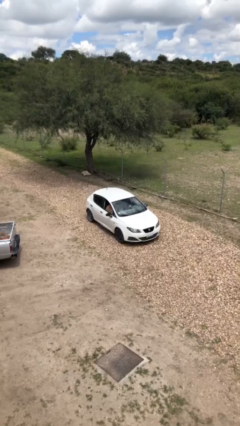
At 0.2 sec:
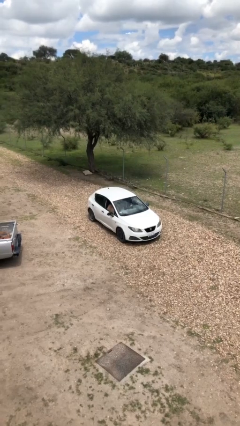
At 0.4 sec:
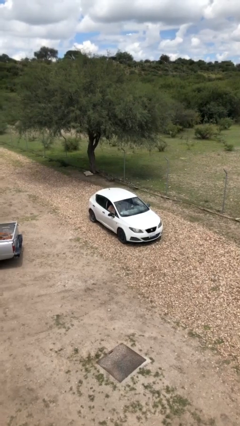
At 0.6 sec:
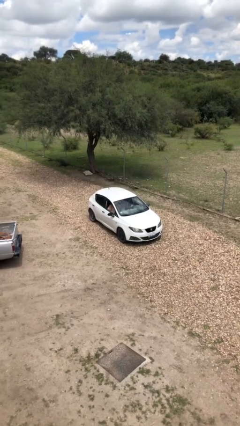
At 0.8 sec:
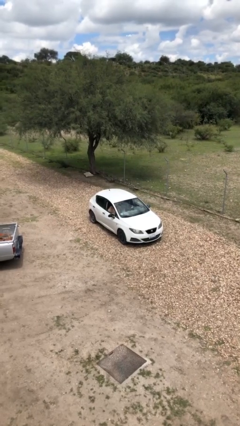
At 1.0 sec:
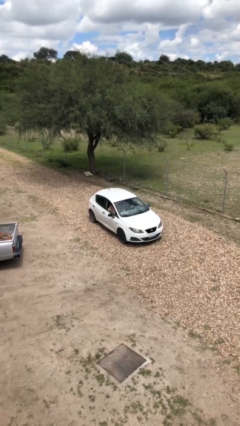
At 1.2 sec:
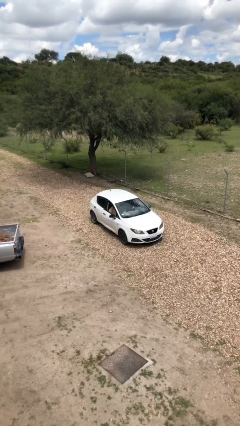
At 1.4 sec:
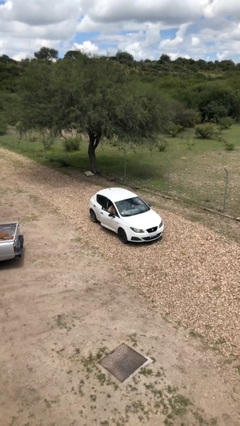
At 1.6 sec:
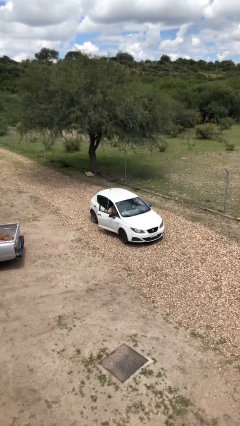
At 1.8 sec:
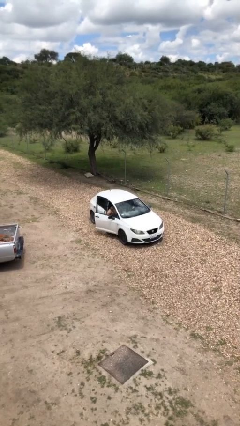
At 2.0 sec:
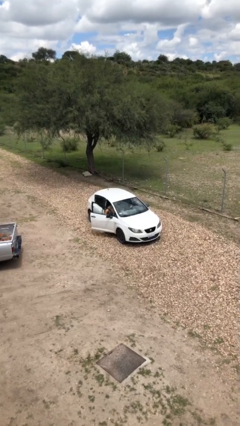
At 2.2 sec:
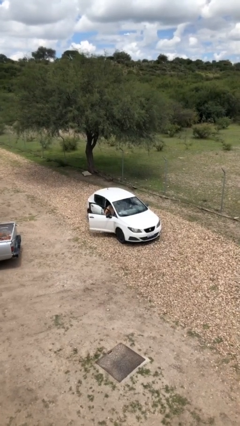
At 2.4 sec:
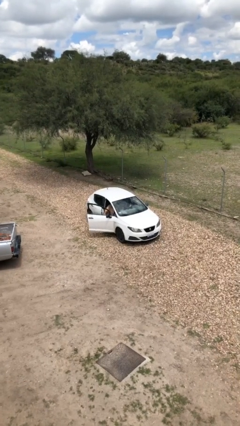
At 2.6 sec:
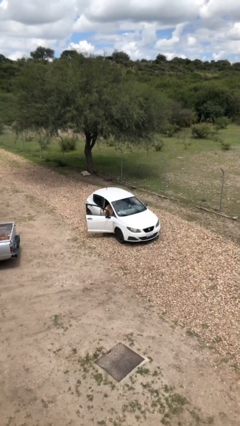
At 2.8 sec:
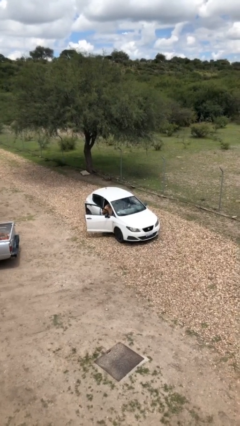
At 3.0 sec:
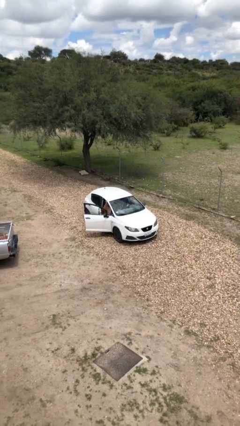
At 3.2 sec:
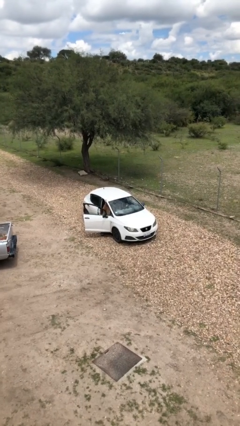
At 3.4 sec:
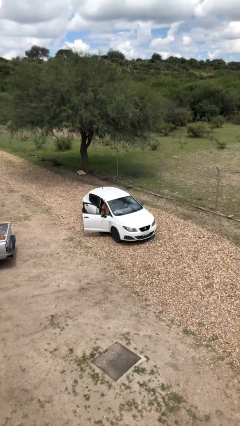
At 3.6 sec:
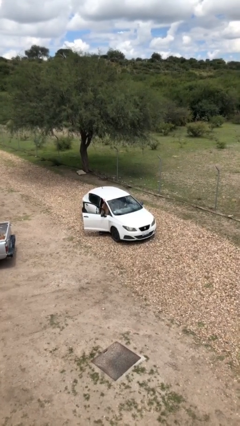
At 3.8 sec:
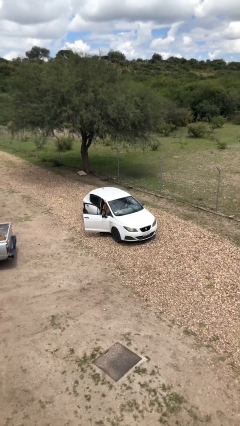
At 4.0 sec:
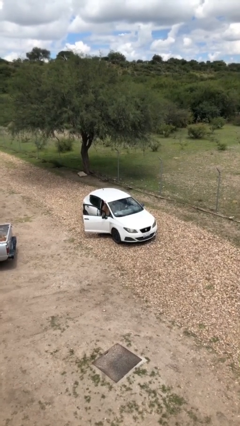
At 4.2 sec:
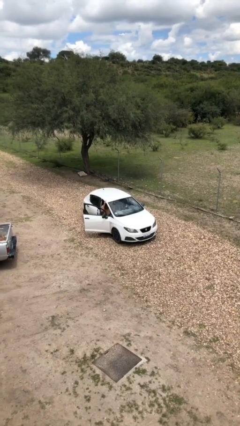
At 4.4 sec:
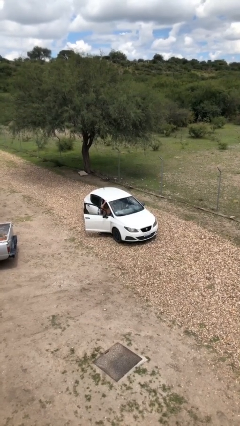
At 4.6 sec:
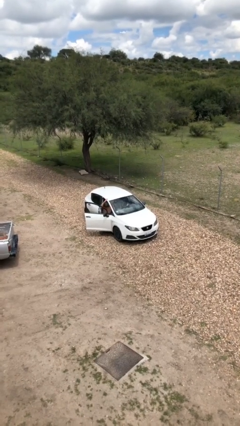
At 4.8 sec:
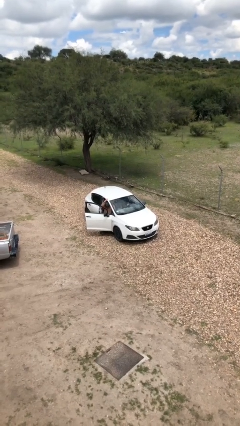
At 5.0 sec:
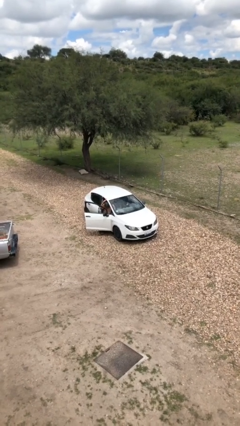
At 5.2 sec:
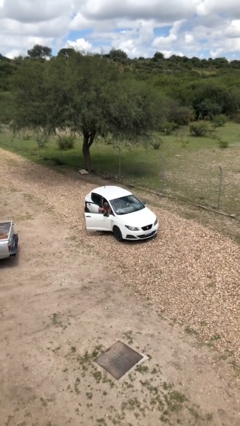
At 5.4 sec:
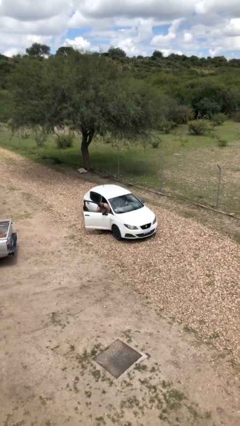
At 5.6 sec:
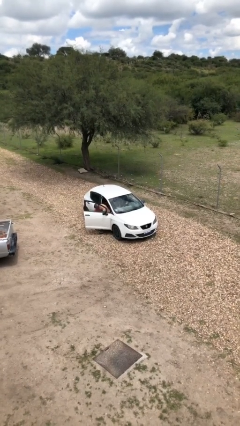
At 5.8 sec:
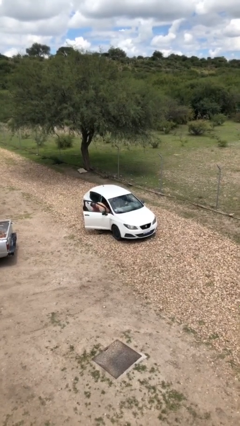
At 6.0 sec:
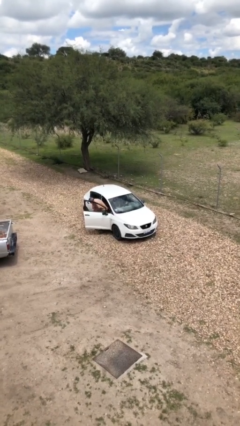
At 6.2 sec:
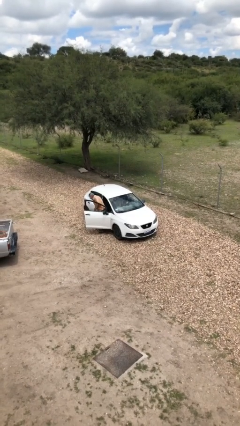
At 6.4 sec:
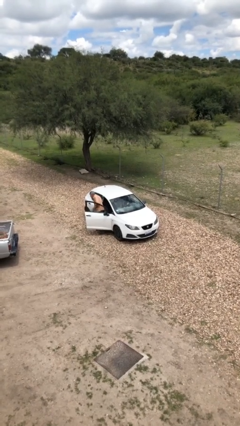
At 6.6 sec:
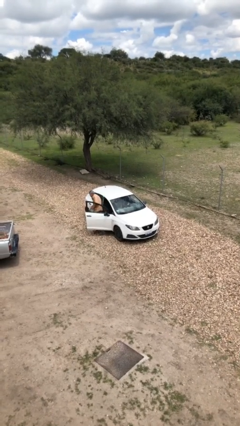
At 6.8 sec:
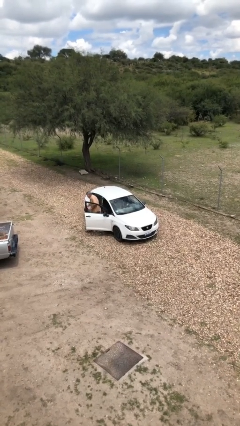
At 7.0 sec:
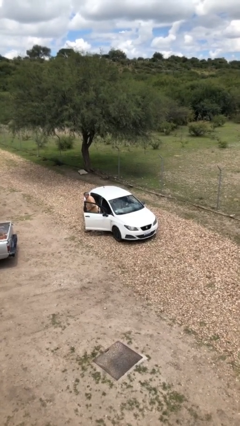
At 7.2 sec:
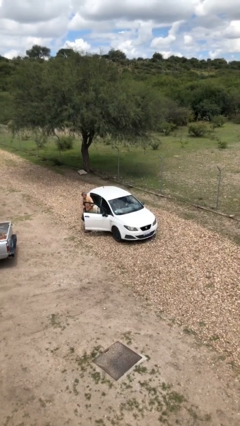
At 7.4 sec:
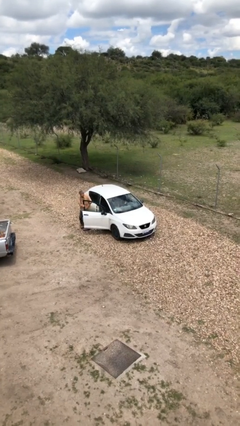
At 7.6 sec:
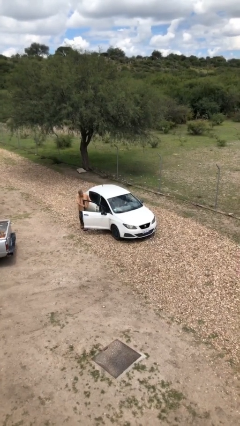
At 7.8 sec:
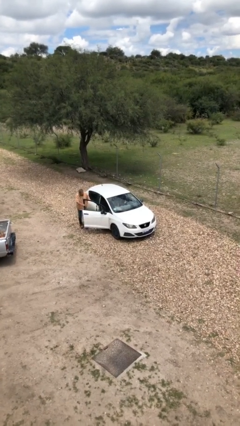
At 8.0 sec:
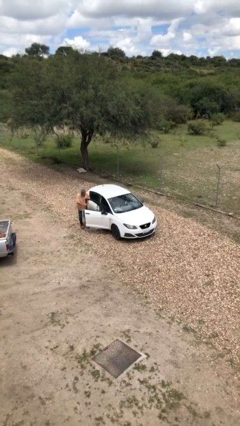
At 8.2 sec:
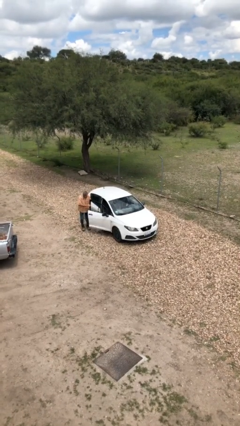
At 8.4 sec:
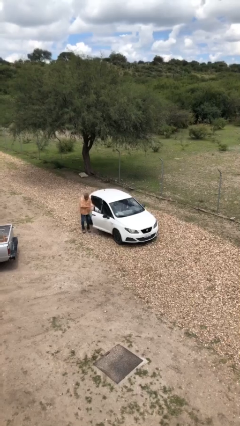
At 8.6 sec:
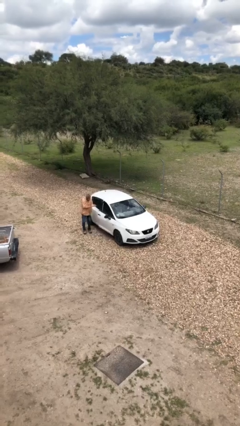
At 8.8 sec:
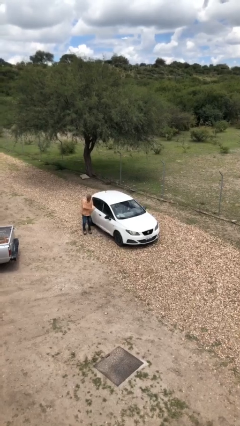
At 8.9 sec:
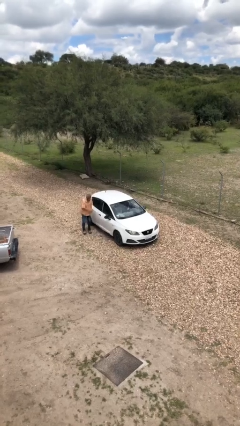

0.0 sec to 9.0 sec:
car drops off person

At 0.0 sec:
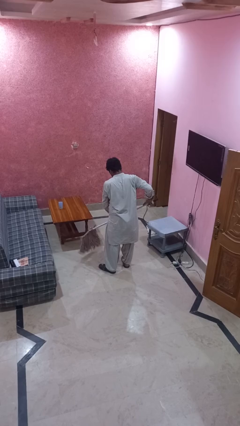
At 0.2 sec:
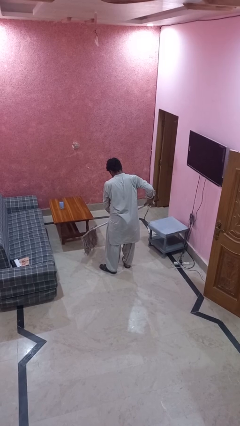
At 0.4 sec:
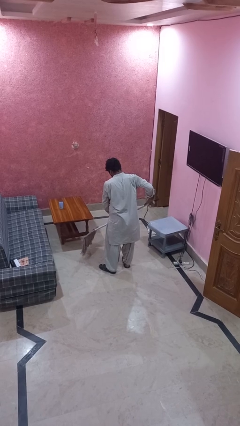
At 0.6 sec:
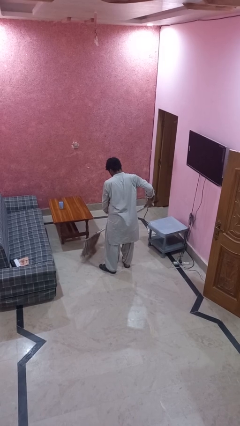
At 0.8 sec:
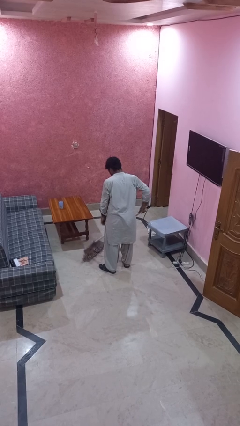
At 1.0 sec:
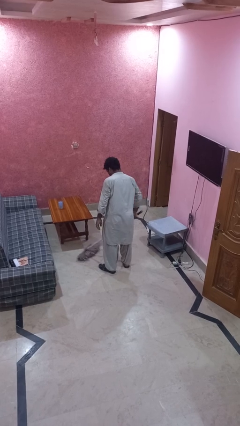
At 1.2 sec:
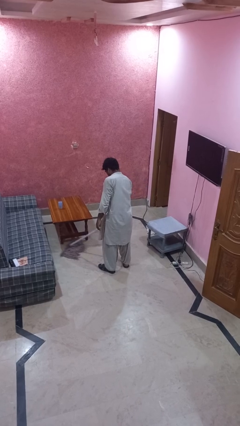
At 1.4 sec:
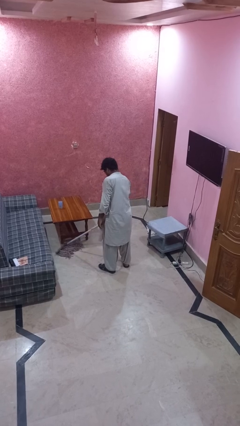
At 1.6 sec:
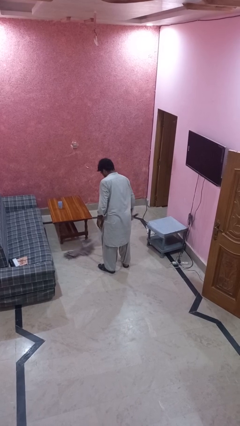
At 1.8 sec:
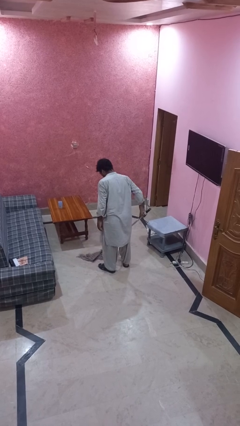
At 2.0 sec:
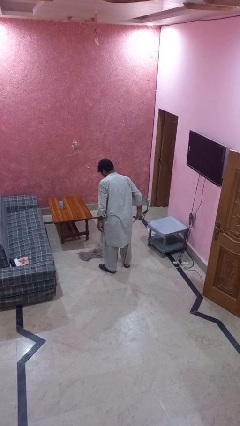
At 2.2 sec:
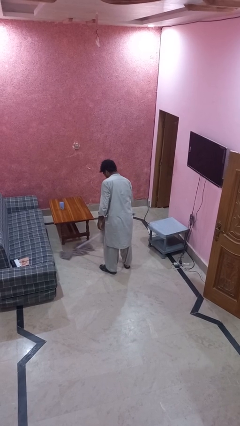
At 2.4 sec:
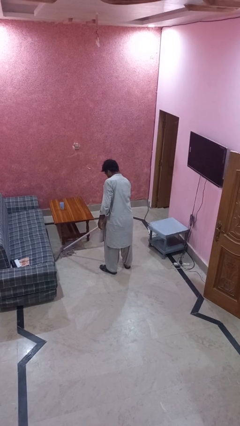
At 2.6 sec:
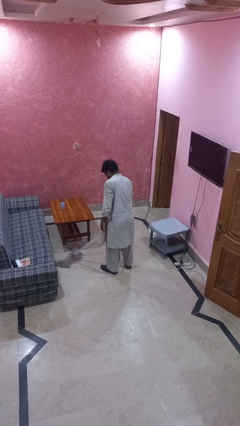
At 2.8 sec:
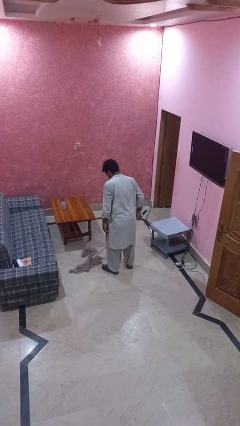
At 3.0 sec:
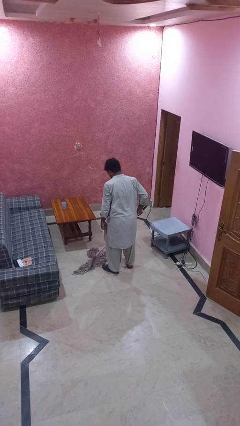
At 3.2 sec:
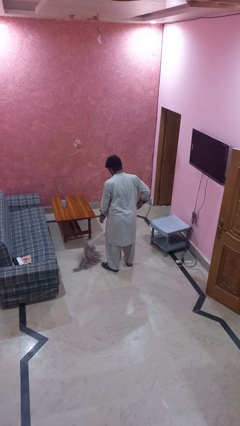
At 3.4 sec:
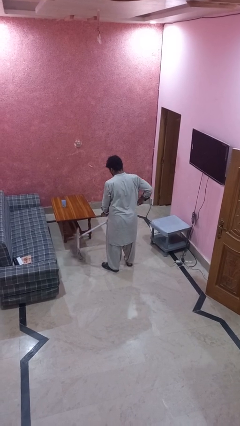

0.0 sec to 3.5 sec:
person mops

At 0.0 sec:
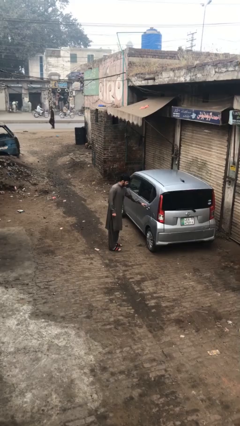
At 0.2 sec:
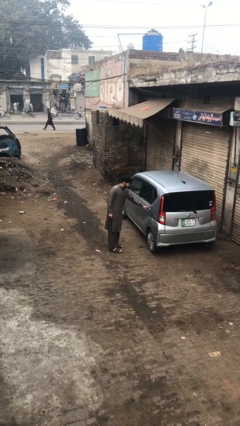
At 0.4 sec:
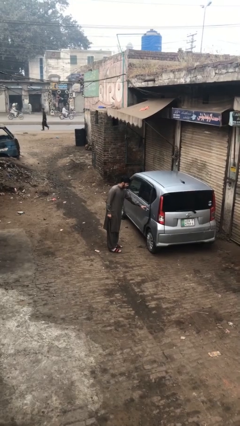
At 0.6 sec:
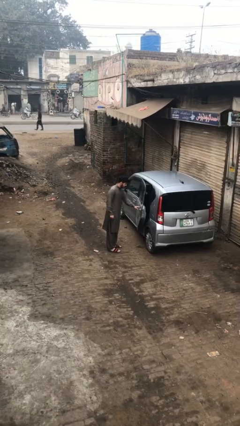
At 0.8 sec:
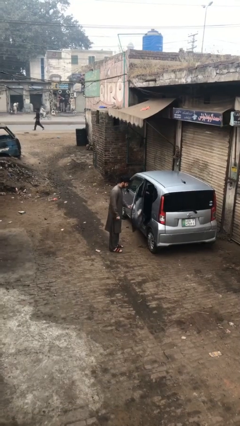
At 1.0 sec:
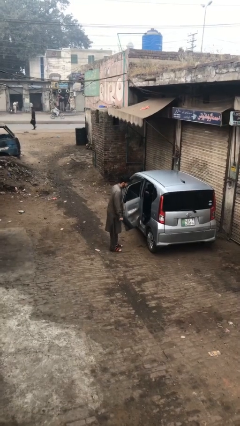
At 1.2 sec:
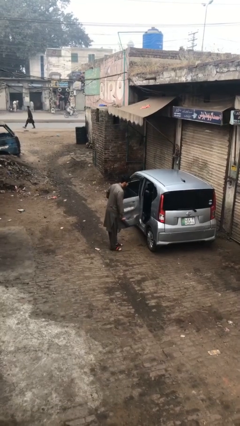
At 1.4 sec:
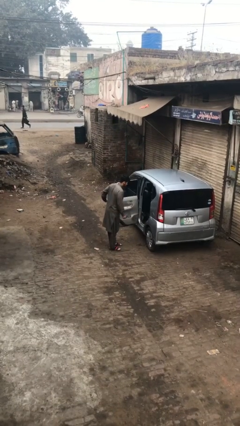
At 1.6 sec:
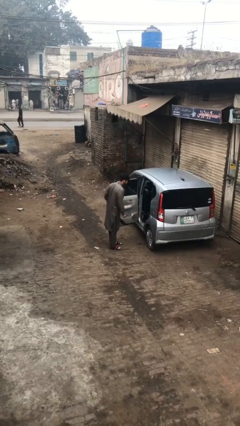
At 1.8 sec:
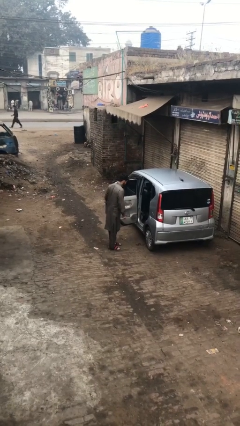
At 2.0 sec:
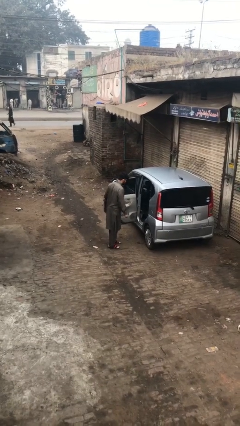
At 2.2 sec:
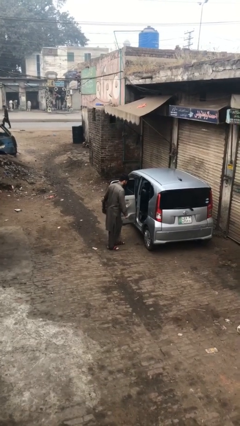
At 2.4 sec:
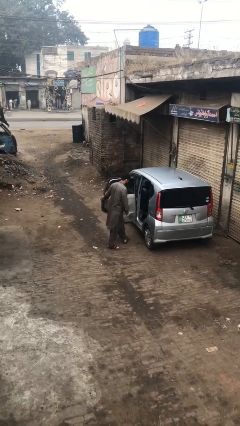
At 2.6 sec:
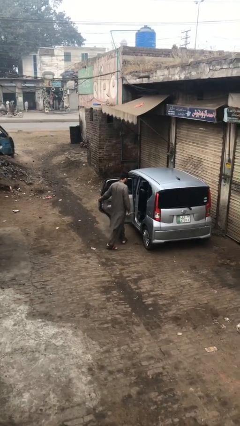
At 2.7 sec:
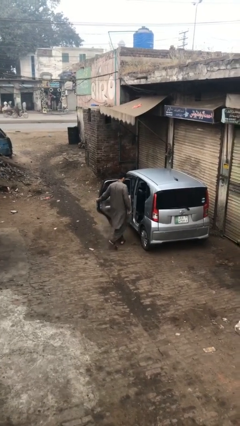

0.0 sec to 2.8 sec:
person opens car door

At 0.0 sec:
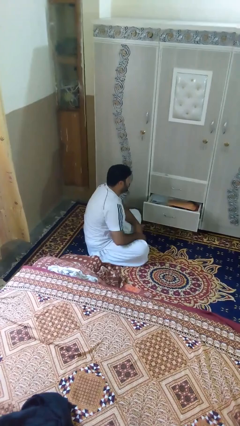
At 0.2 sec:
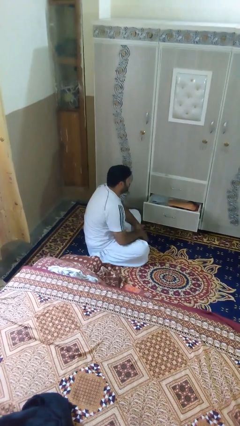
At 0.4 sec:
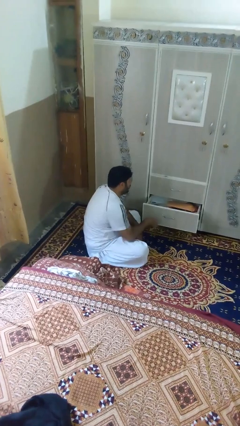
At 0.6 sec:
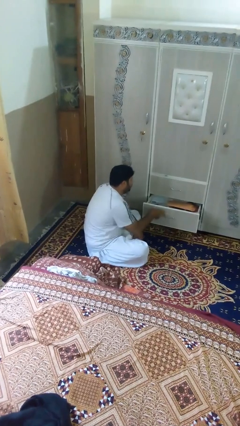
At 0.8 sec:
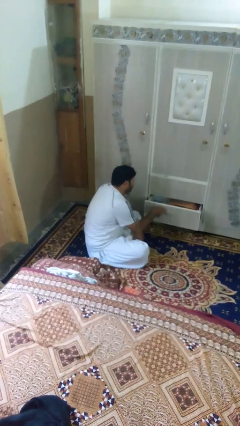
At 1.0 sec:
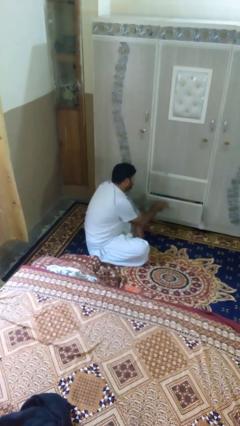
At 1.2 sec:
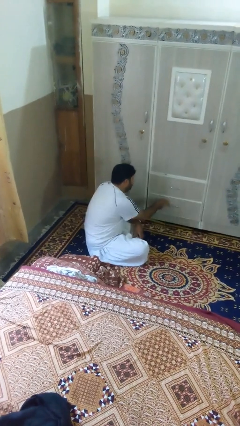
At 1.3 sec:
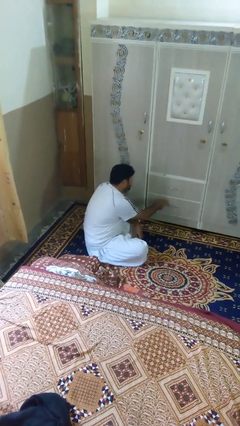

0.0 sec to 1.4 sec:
person closes dresser drawer

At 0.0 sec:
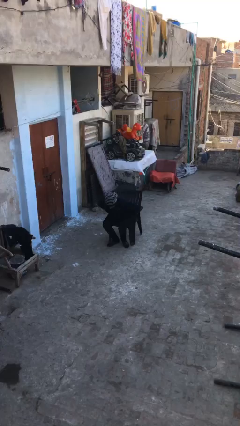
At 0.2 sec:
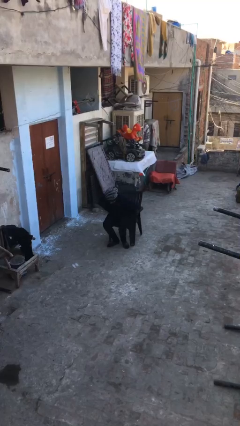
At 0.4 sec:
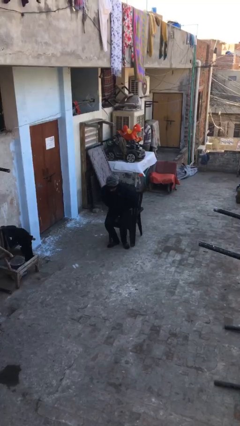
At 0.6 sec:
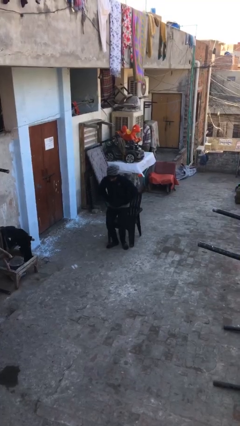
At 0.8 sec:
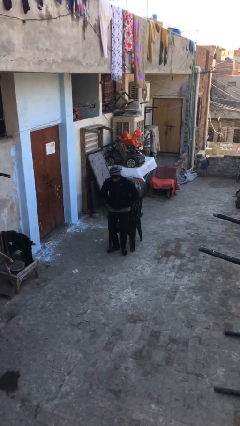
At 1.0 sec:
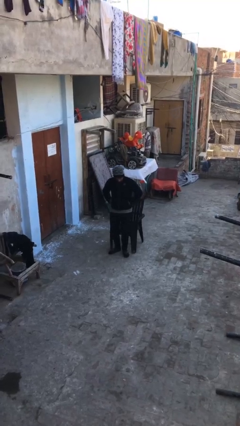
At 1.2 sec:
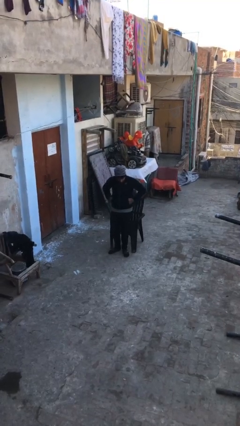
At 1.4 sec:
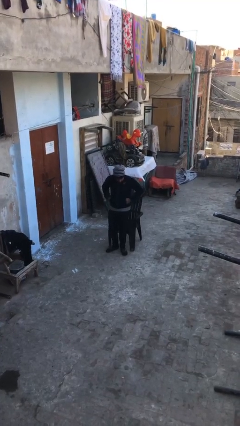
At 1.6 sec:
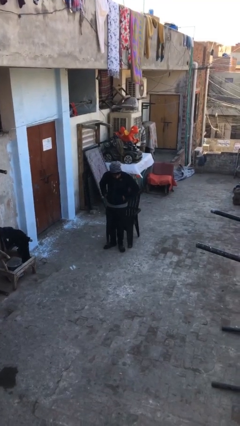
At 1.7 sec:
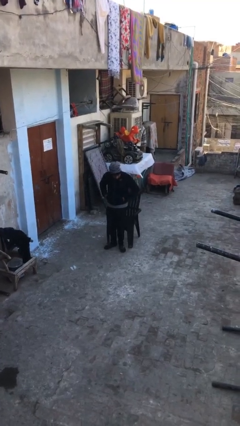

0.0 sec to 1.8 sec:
person stands up
